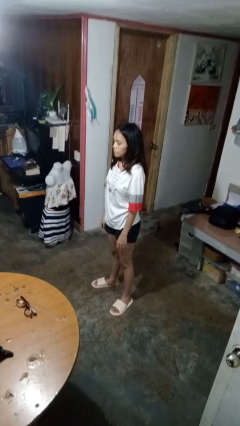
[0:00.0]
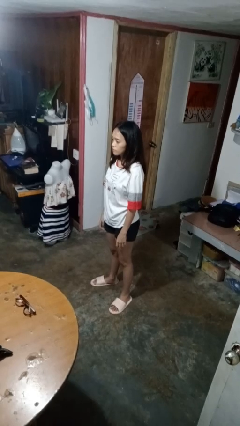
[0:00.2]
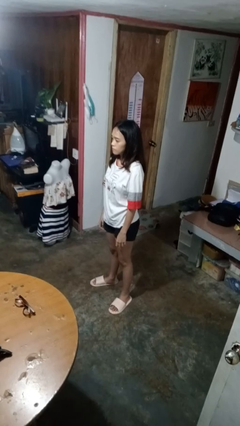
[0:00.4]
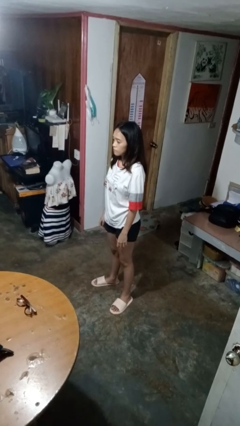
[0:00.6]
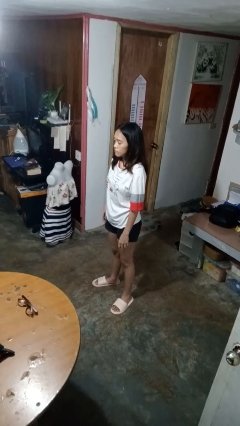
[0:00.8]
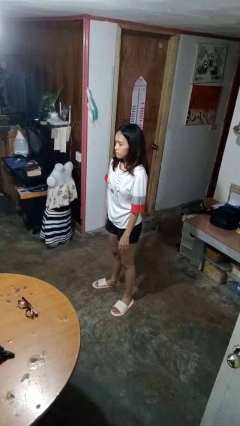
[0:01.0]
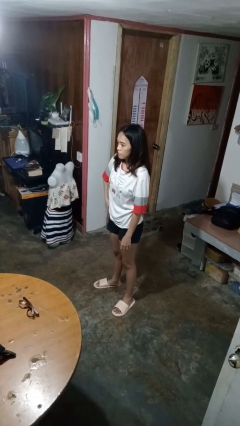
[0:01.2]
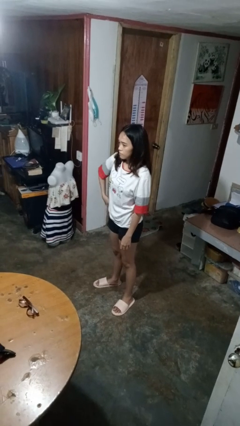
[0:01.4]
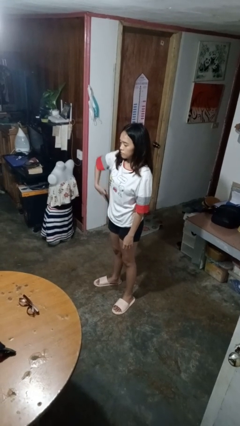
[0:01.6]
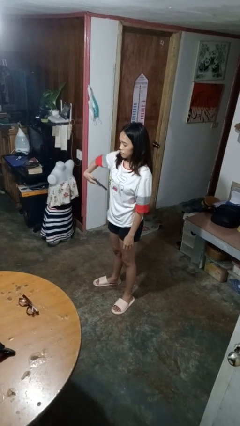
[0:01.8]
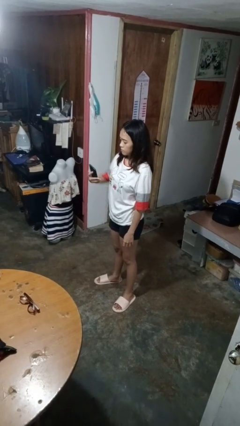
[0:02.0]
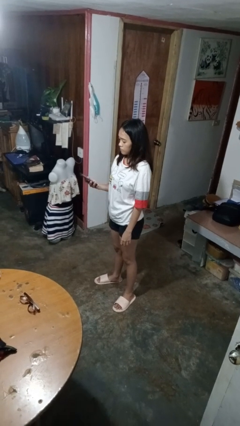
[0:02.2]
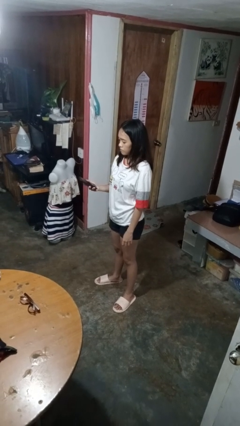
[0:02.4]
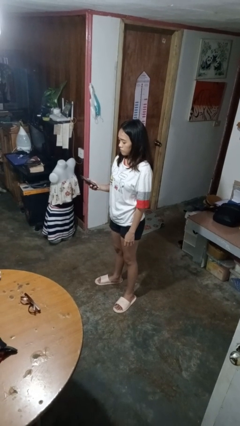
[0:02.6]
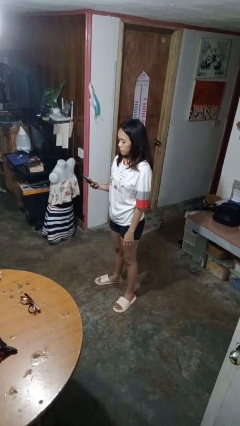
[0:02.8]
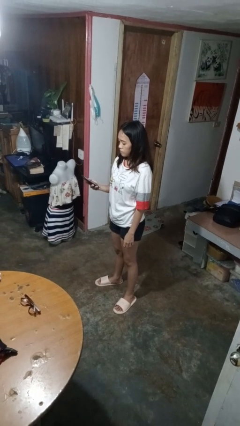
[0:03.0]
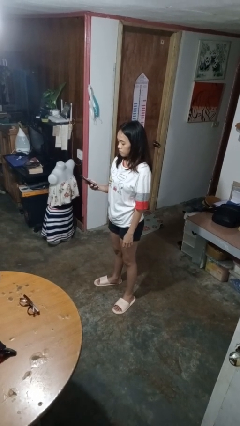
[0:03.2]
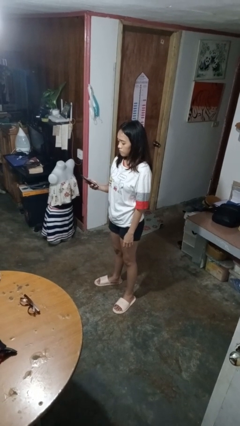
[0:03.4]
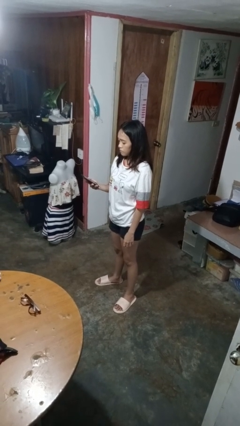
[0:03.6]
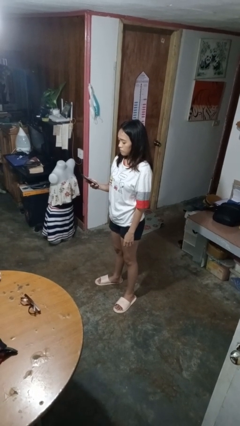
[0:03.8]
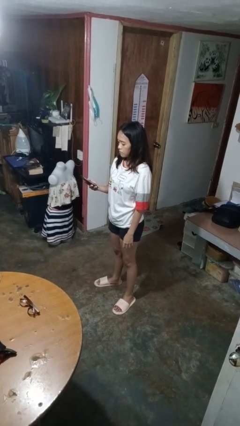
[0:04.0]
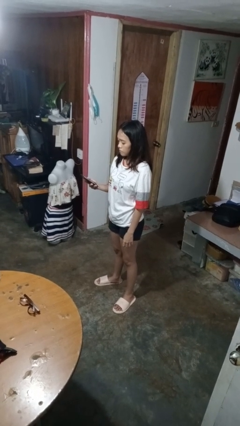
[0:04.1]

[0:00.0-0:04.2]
person takes phone from pocket

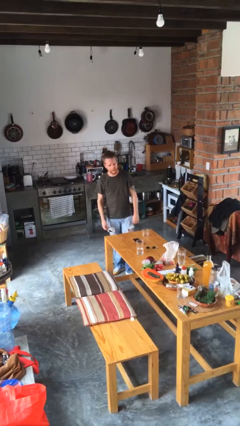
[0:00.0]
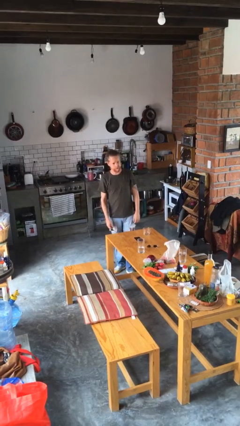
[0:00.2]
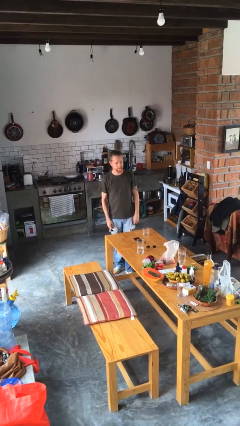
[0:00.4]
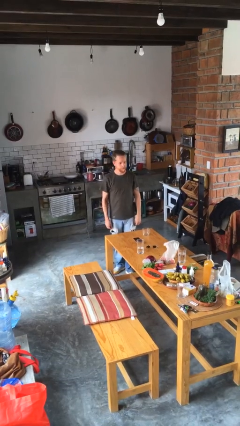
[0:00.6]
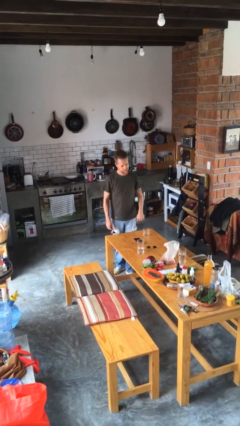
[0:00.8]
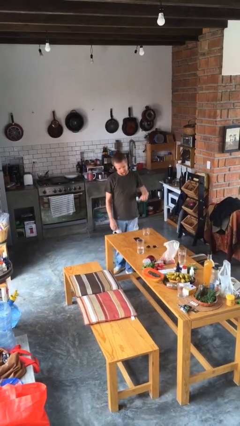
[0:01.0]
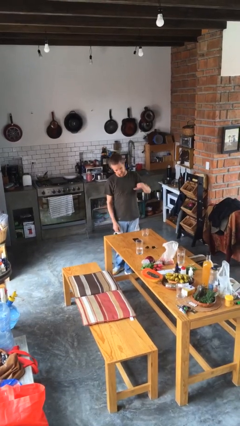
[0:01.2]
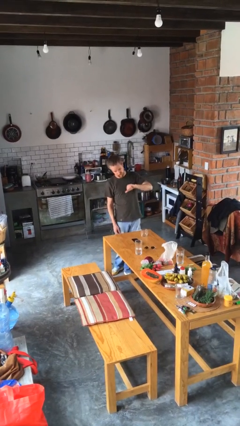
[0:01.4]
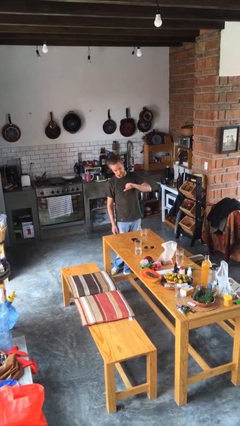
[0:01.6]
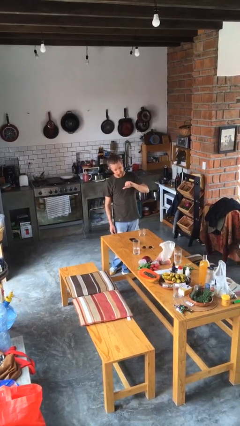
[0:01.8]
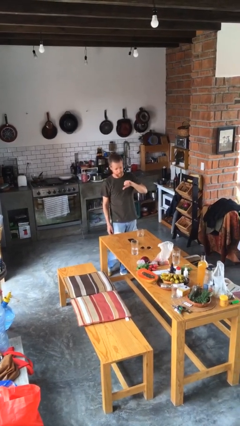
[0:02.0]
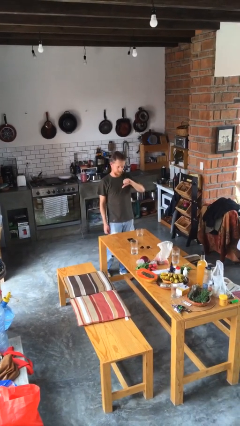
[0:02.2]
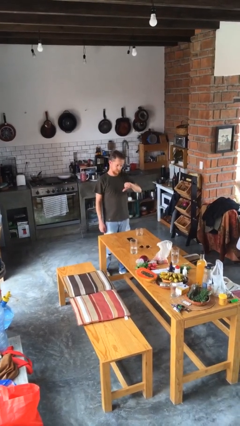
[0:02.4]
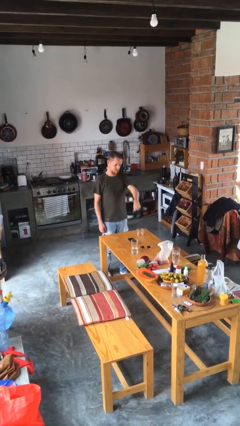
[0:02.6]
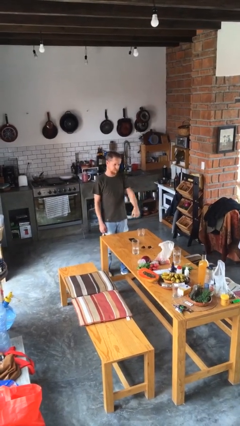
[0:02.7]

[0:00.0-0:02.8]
person gestures thumbs down

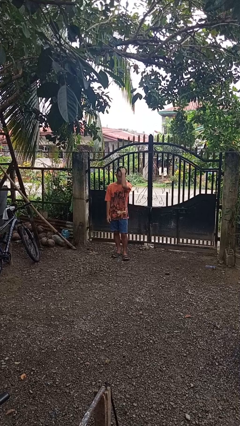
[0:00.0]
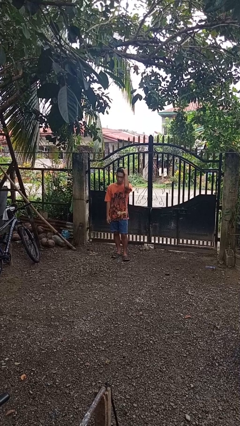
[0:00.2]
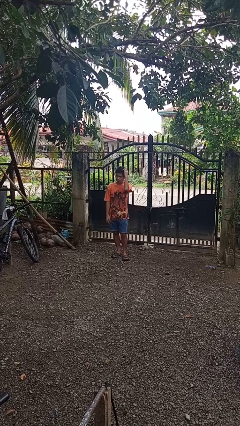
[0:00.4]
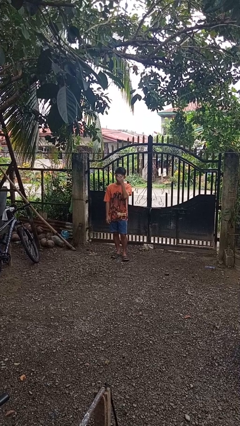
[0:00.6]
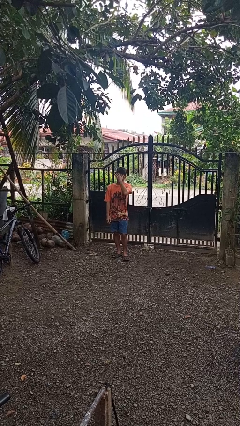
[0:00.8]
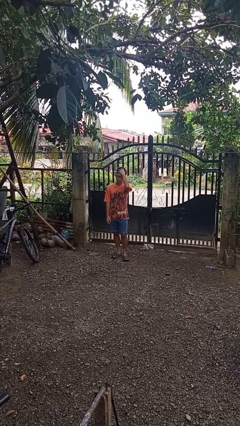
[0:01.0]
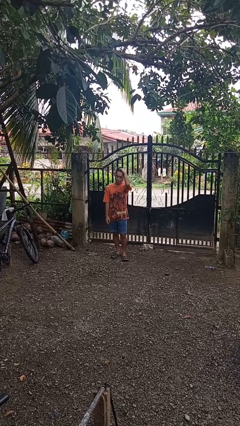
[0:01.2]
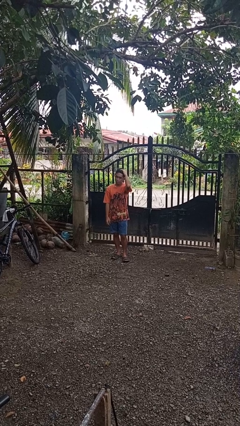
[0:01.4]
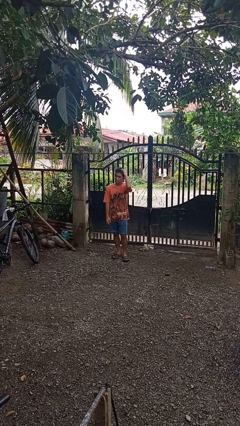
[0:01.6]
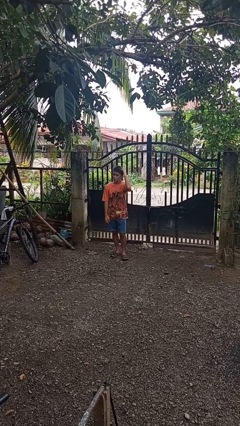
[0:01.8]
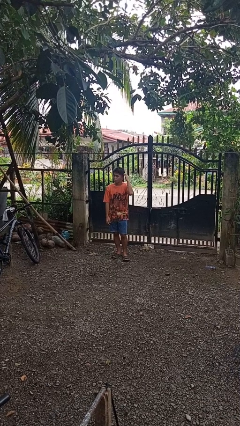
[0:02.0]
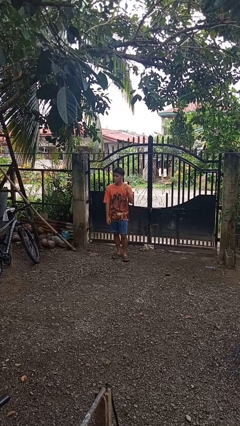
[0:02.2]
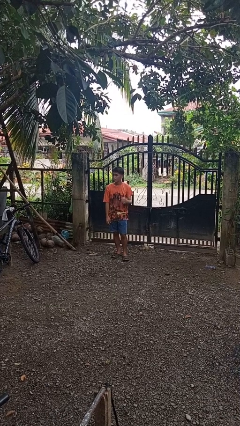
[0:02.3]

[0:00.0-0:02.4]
person strokes hair

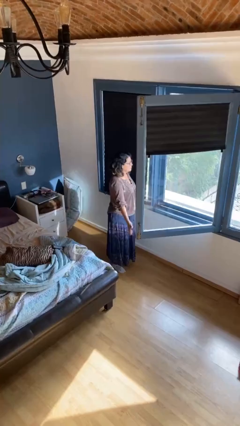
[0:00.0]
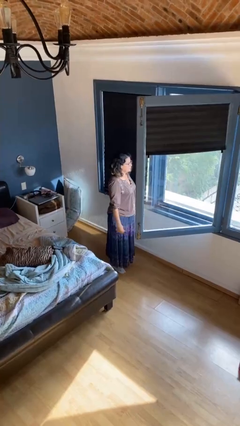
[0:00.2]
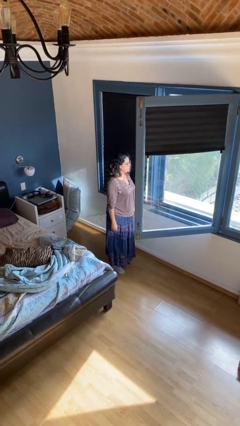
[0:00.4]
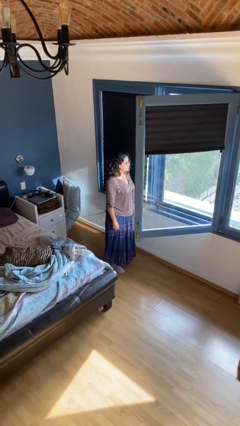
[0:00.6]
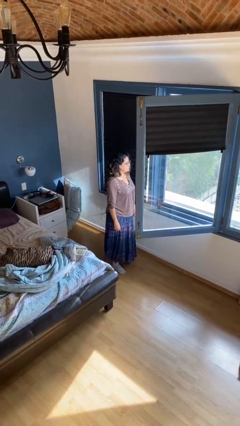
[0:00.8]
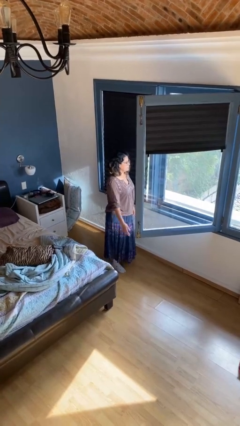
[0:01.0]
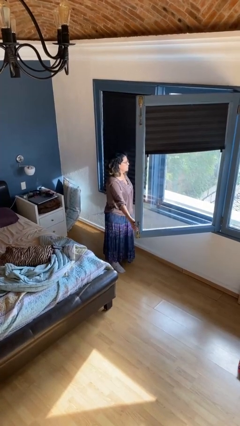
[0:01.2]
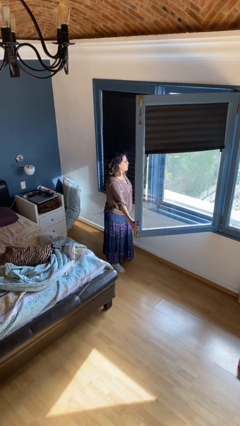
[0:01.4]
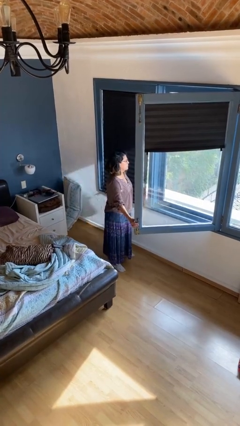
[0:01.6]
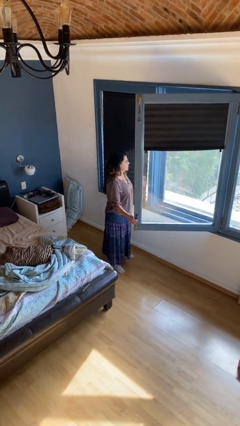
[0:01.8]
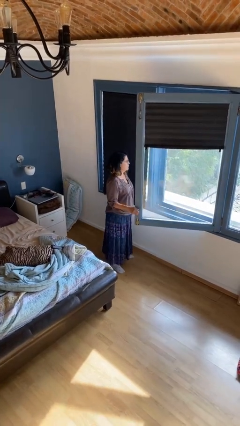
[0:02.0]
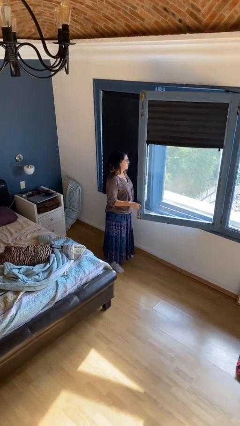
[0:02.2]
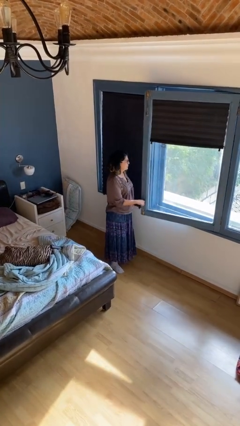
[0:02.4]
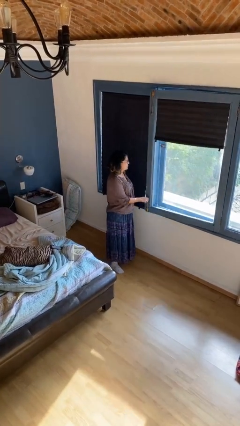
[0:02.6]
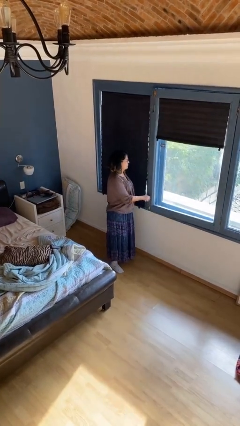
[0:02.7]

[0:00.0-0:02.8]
person closes home window

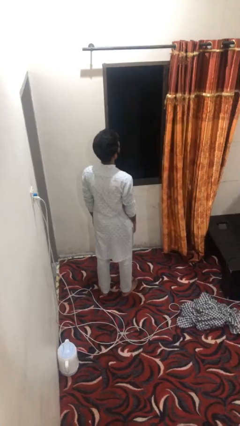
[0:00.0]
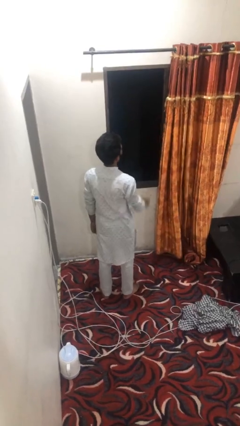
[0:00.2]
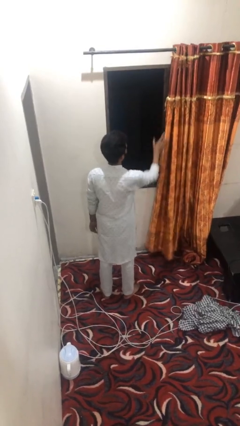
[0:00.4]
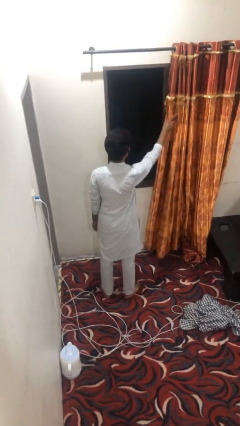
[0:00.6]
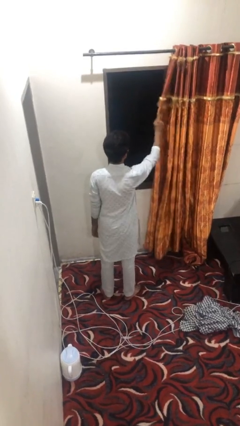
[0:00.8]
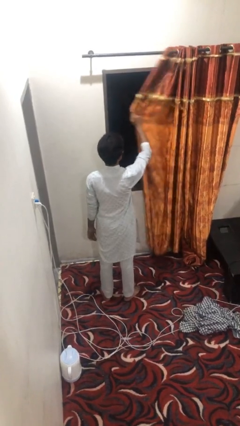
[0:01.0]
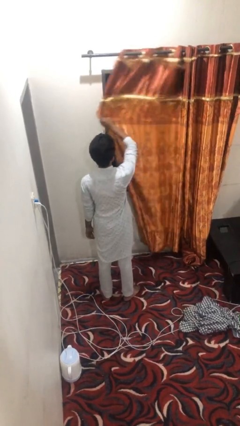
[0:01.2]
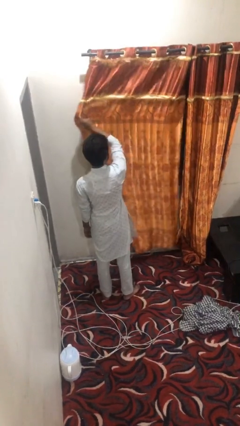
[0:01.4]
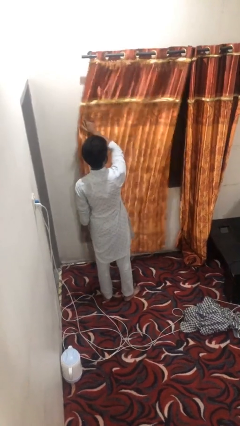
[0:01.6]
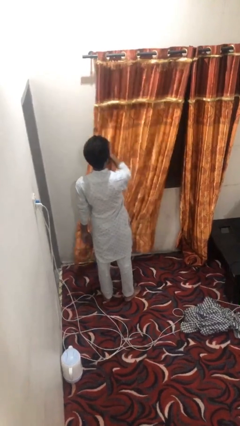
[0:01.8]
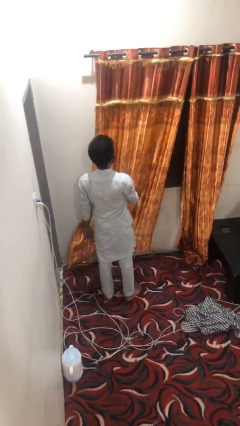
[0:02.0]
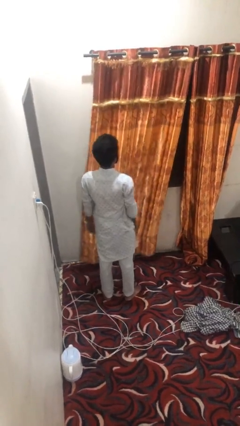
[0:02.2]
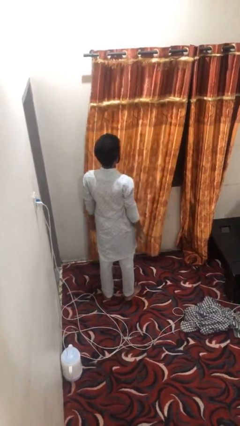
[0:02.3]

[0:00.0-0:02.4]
person closes curtains

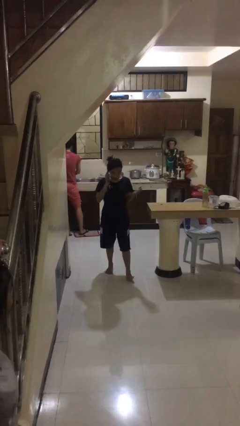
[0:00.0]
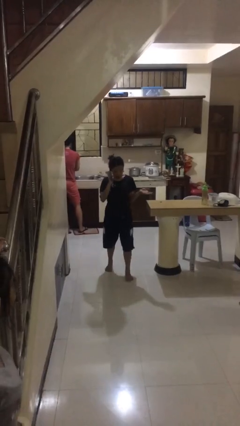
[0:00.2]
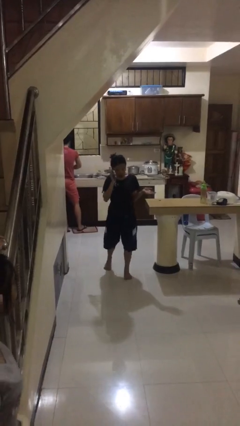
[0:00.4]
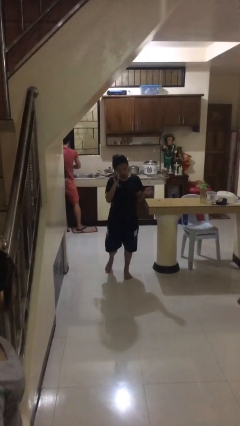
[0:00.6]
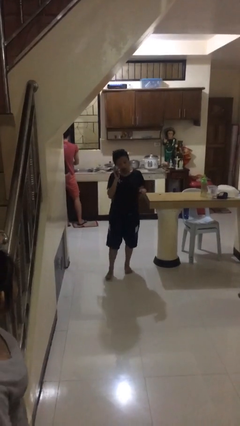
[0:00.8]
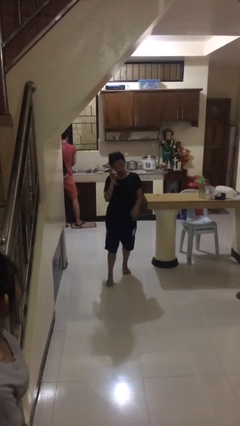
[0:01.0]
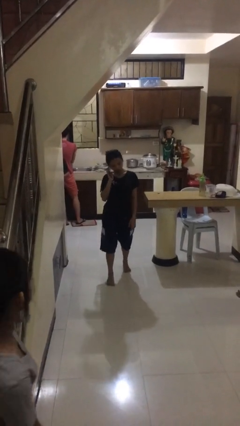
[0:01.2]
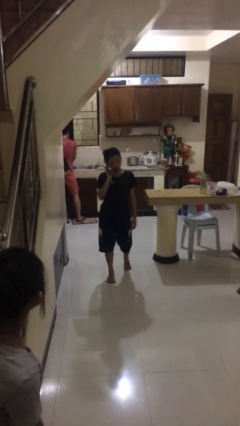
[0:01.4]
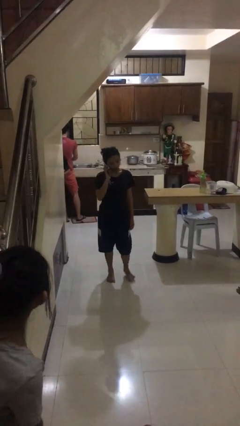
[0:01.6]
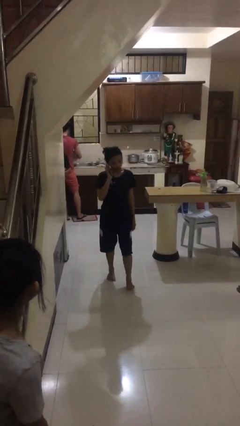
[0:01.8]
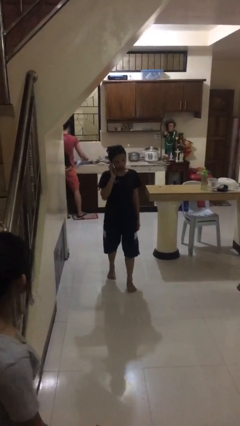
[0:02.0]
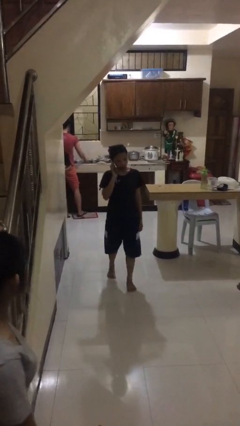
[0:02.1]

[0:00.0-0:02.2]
person talks on phone

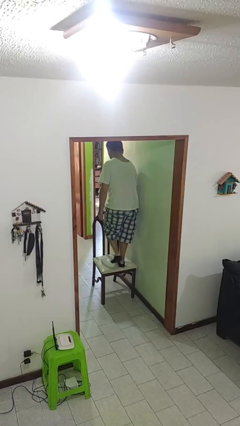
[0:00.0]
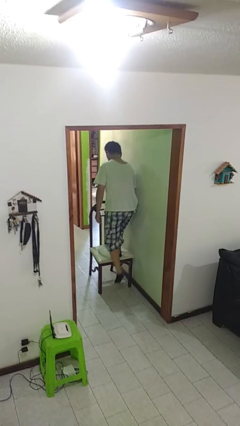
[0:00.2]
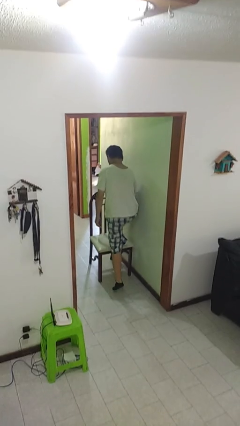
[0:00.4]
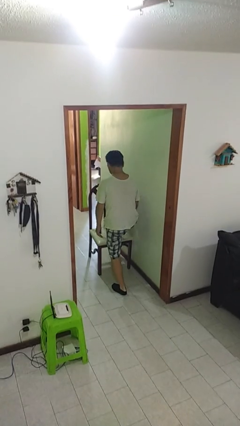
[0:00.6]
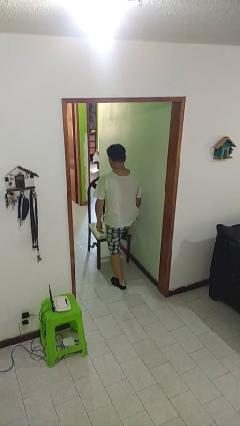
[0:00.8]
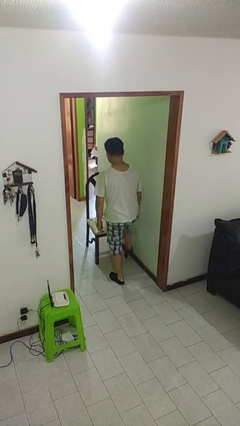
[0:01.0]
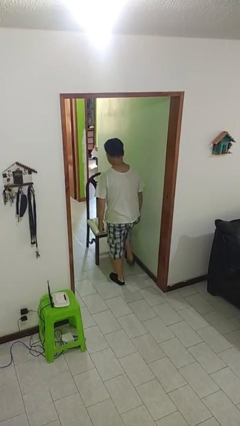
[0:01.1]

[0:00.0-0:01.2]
person climbs off chair
